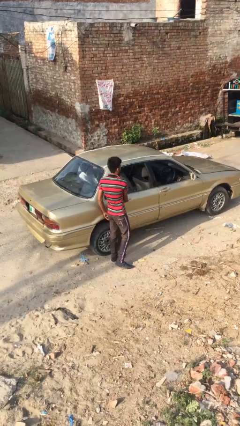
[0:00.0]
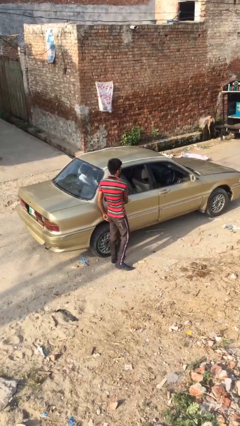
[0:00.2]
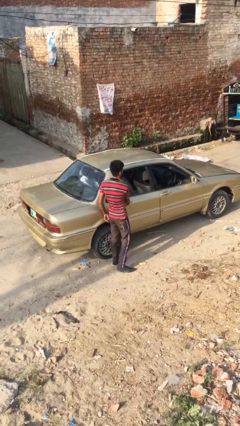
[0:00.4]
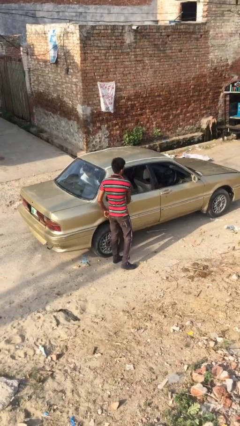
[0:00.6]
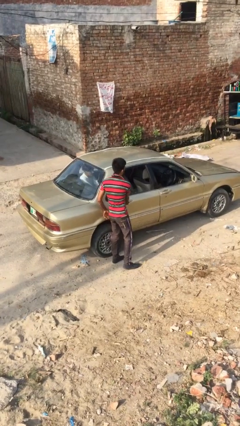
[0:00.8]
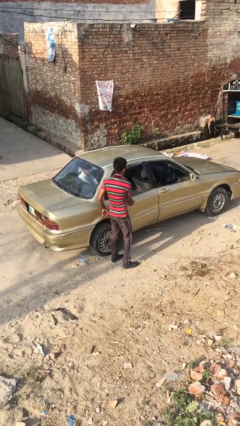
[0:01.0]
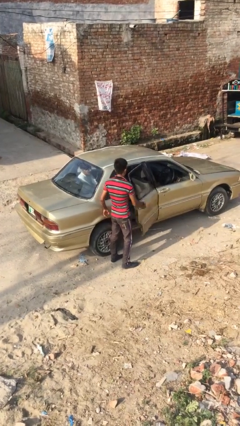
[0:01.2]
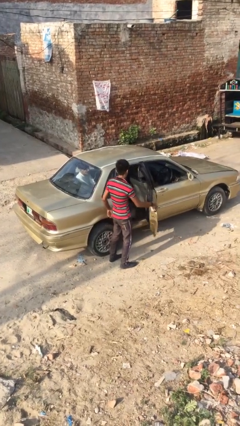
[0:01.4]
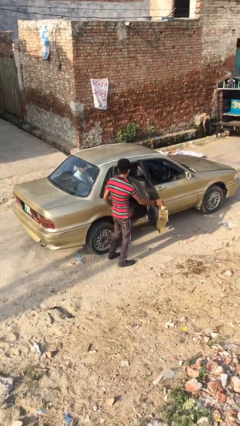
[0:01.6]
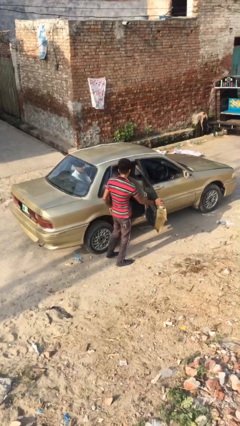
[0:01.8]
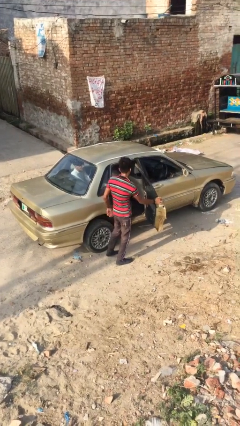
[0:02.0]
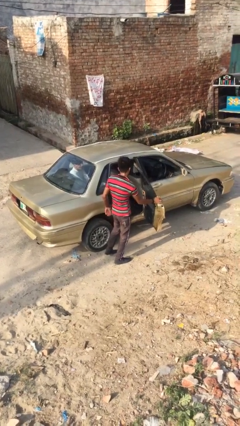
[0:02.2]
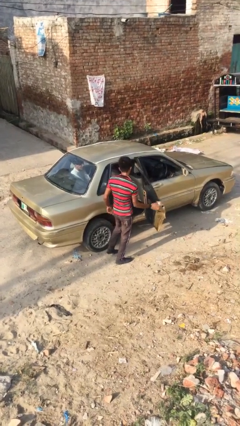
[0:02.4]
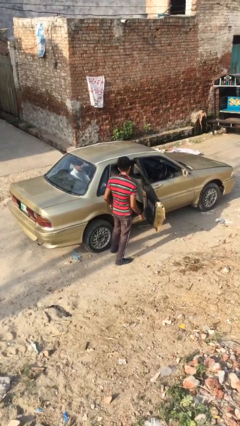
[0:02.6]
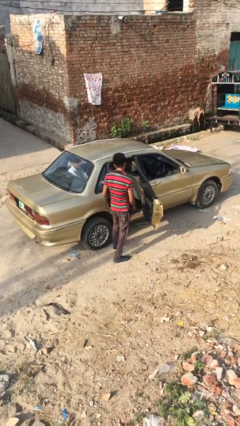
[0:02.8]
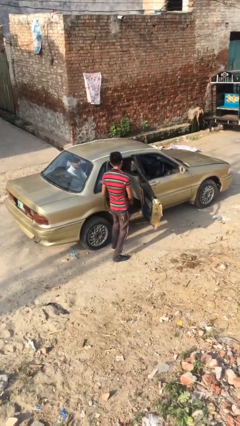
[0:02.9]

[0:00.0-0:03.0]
person opens car door

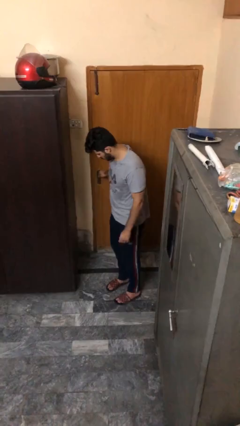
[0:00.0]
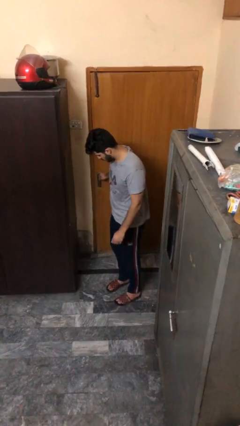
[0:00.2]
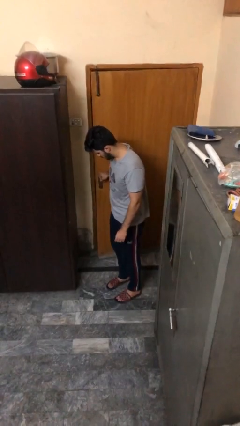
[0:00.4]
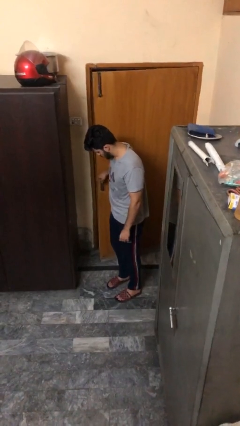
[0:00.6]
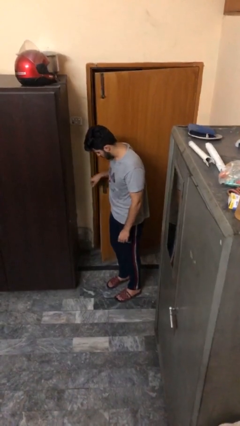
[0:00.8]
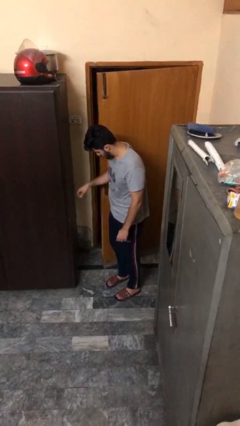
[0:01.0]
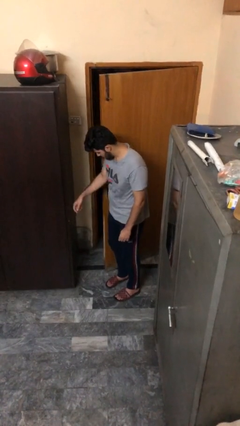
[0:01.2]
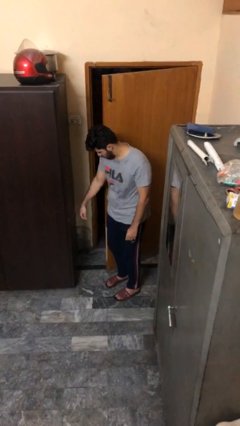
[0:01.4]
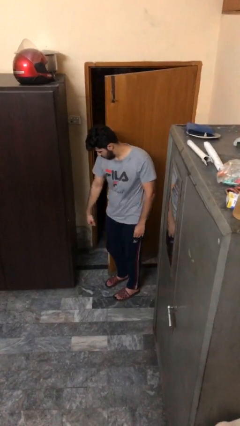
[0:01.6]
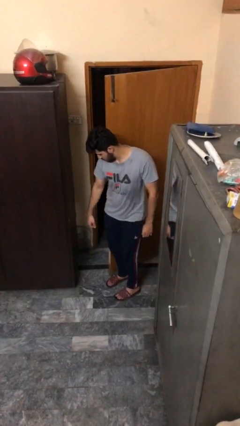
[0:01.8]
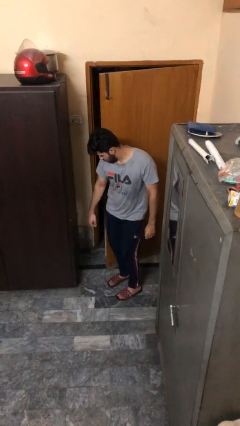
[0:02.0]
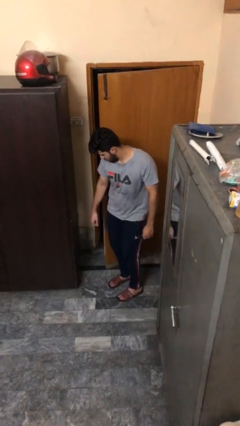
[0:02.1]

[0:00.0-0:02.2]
person opens facility door

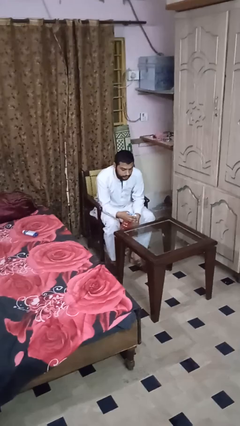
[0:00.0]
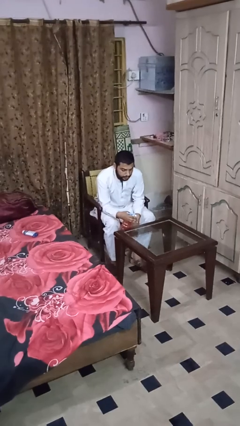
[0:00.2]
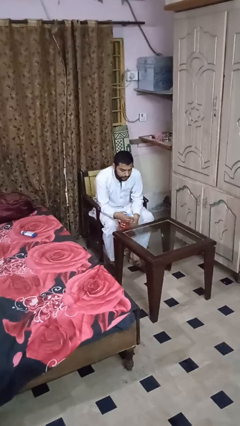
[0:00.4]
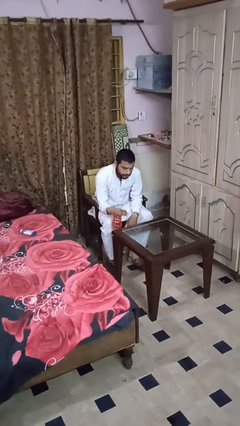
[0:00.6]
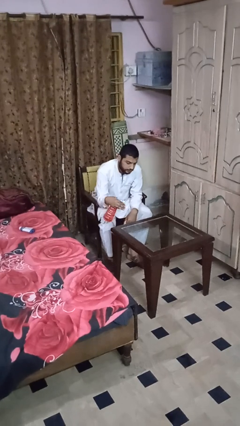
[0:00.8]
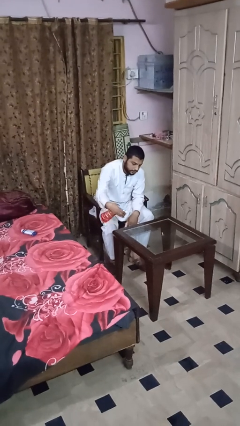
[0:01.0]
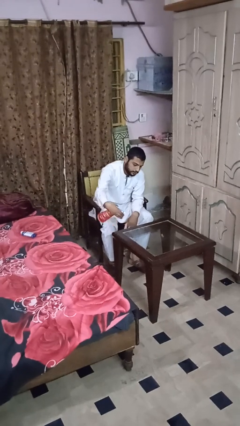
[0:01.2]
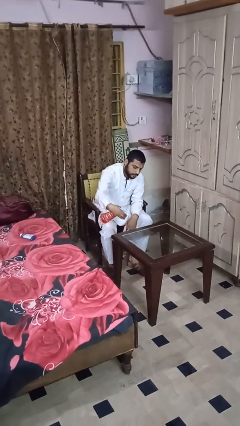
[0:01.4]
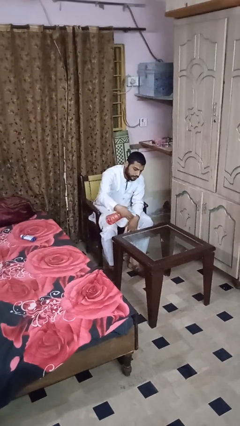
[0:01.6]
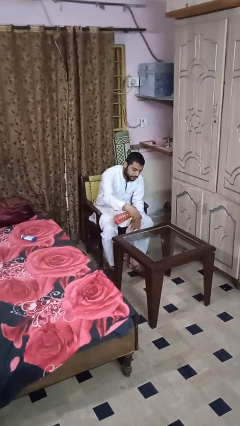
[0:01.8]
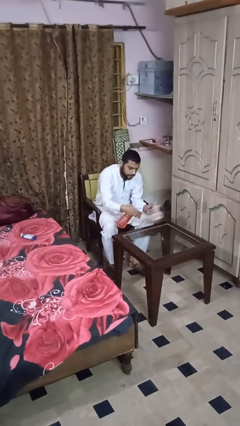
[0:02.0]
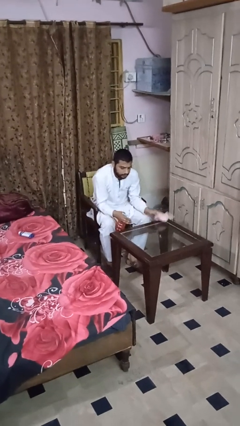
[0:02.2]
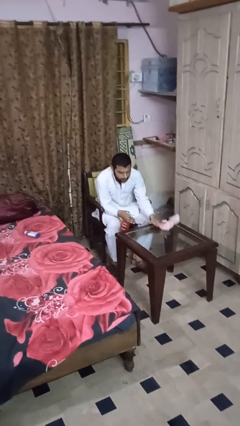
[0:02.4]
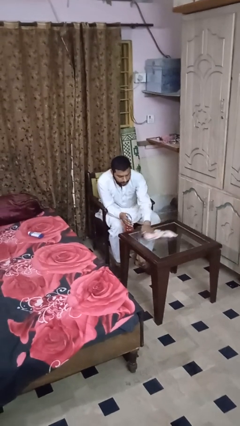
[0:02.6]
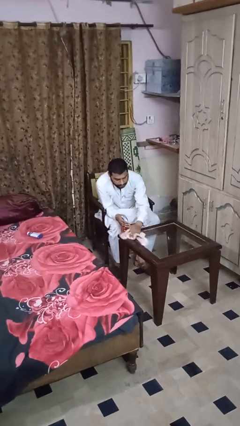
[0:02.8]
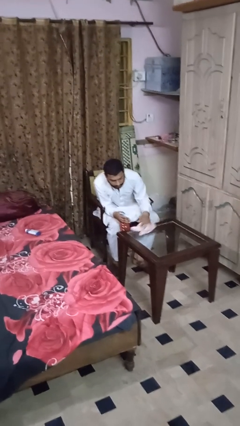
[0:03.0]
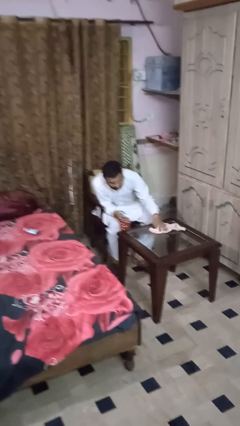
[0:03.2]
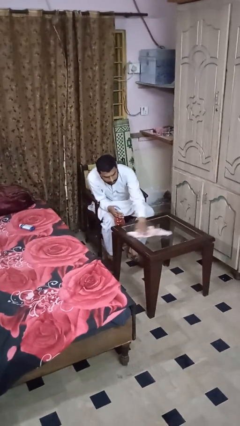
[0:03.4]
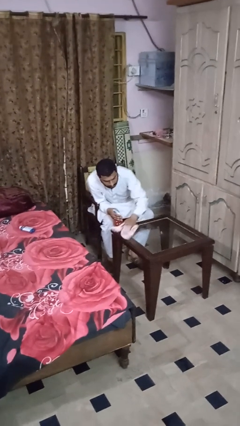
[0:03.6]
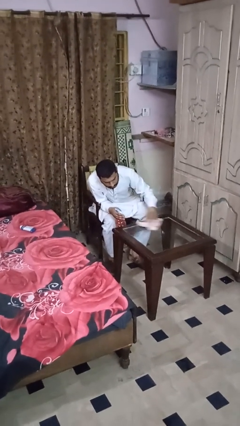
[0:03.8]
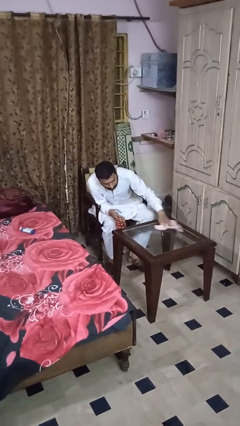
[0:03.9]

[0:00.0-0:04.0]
person sprays from bottle

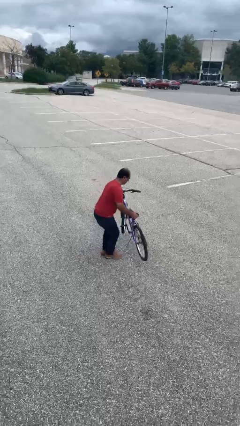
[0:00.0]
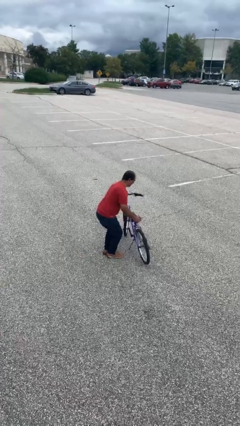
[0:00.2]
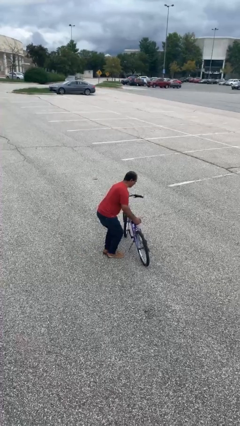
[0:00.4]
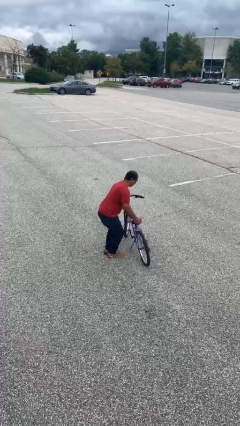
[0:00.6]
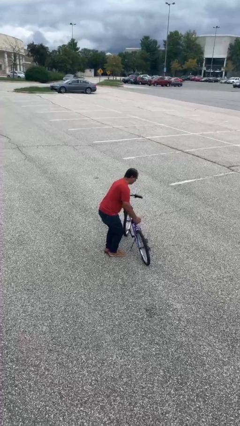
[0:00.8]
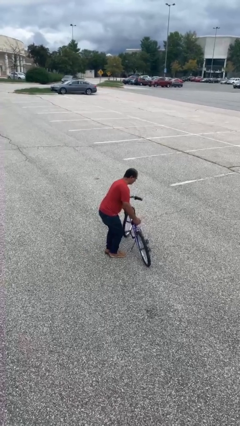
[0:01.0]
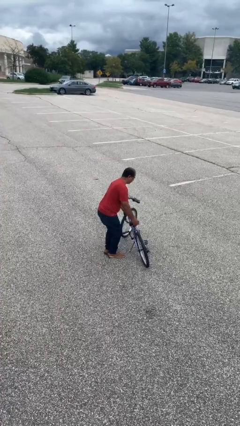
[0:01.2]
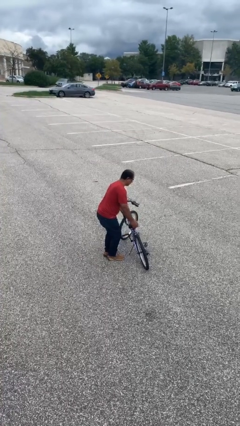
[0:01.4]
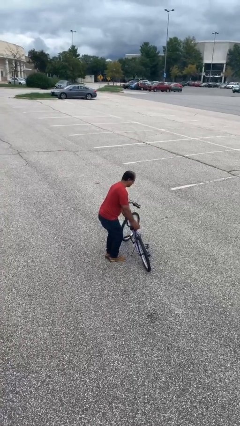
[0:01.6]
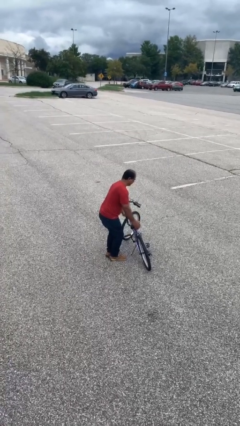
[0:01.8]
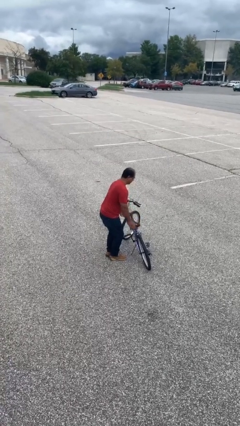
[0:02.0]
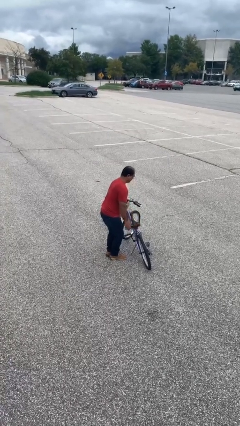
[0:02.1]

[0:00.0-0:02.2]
person puts down object on floor

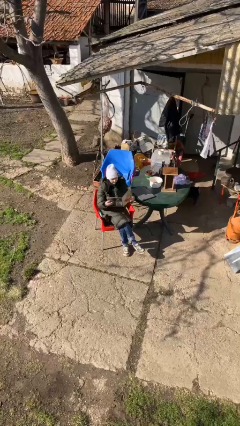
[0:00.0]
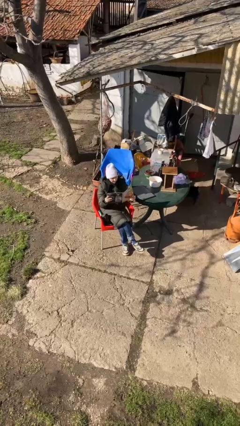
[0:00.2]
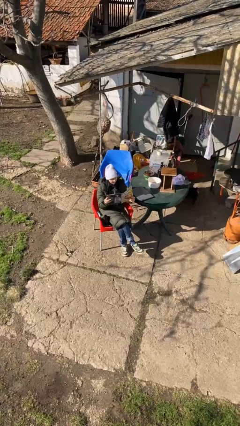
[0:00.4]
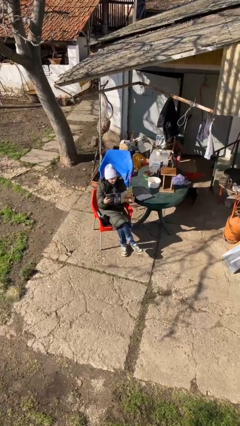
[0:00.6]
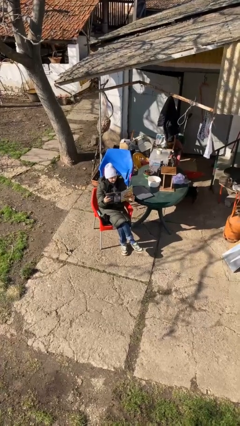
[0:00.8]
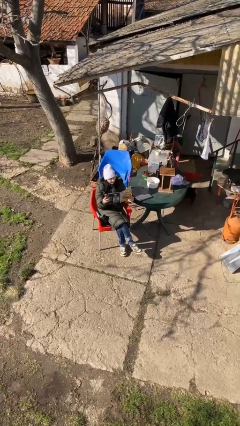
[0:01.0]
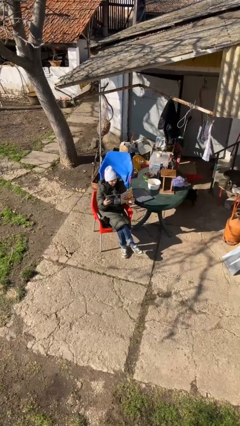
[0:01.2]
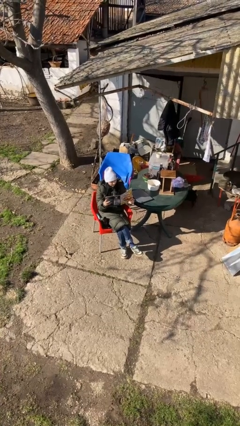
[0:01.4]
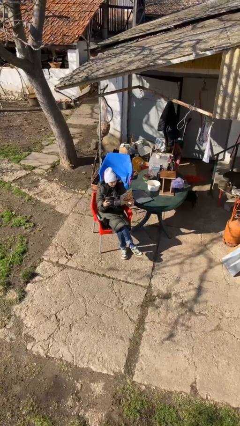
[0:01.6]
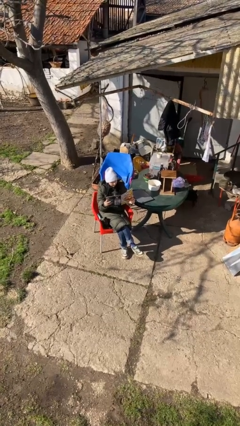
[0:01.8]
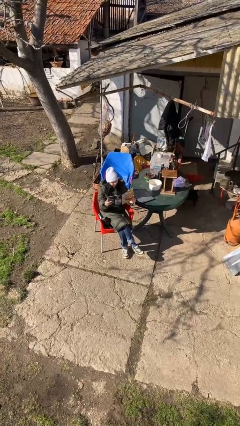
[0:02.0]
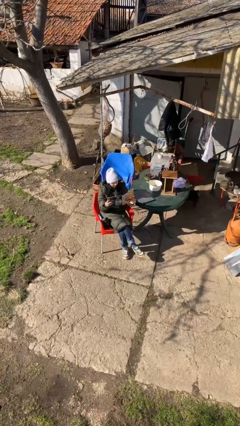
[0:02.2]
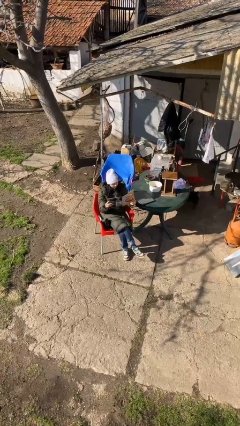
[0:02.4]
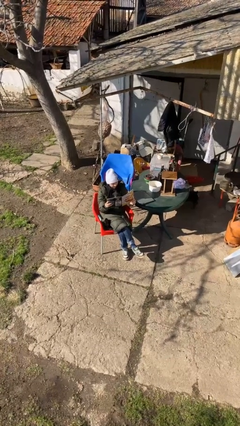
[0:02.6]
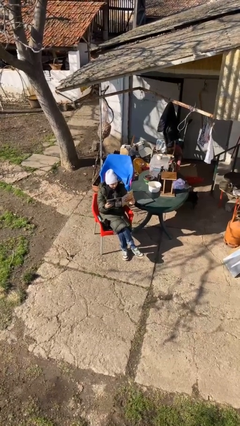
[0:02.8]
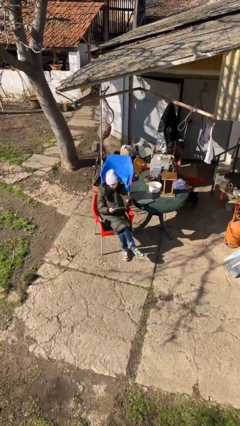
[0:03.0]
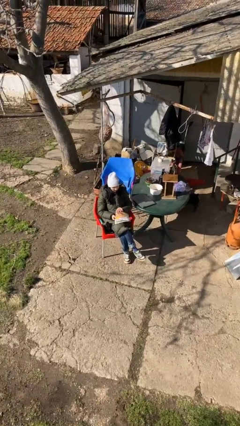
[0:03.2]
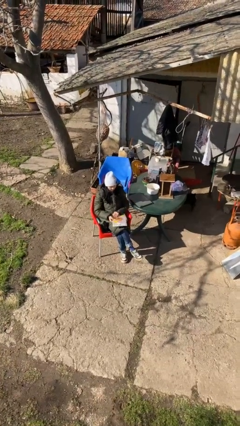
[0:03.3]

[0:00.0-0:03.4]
person reads document

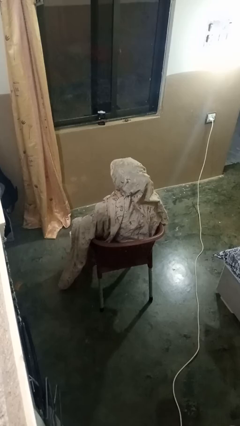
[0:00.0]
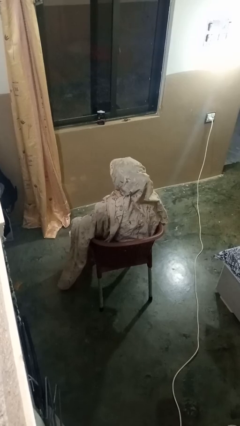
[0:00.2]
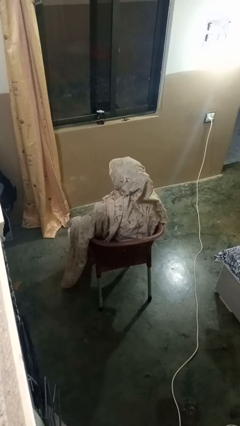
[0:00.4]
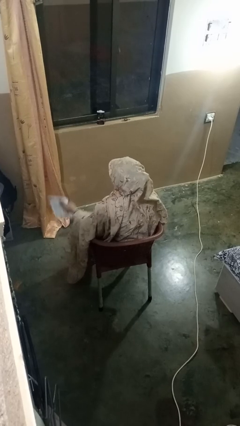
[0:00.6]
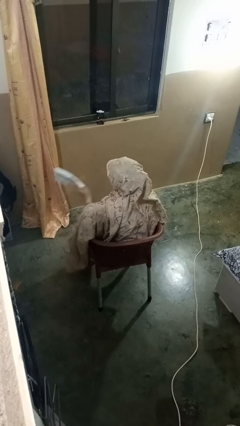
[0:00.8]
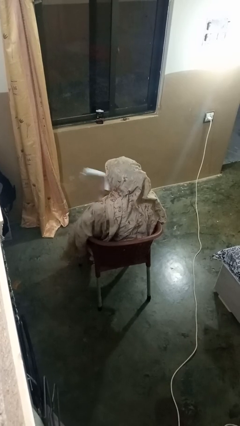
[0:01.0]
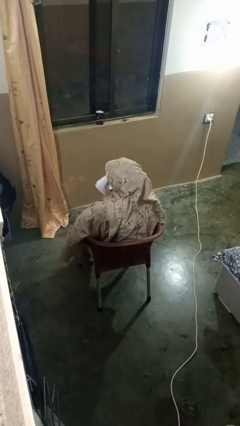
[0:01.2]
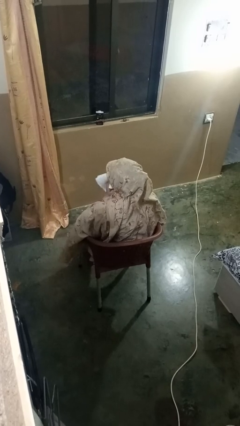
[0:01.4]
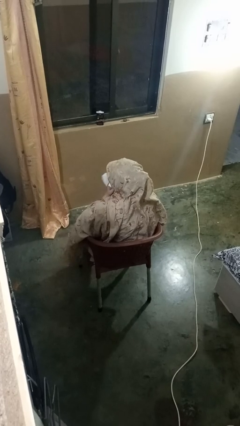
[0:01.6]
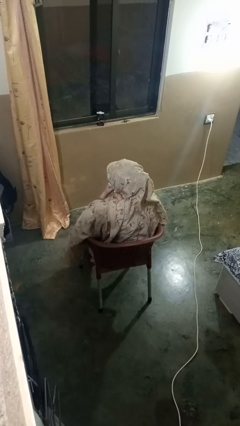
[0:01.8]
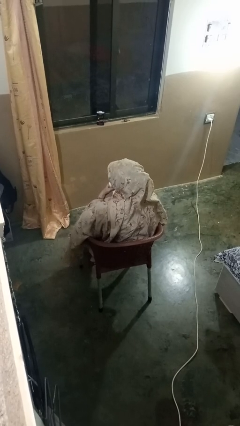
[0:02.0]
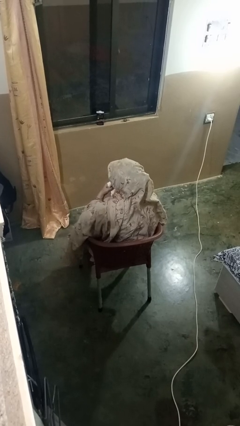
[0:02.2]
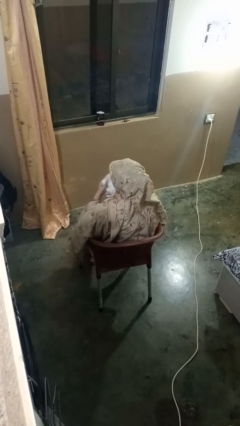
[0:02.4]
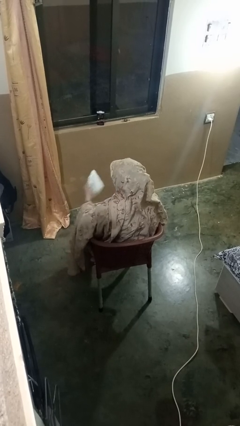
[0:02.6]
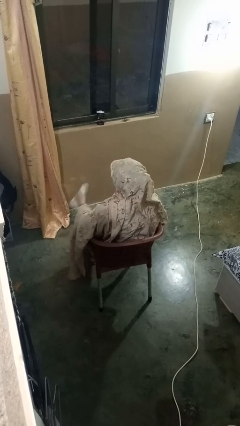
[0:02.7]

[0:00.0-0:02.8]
person wipes mouth with napkin
